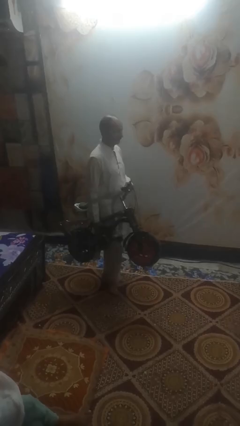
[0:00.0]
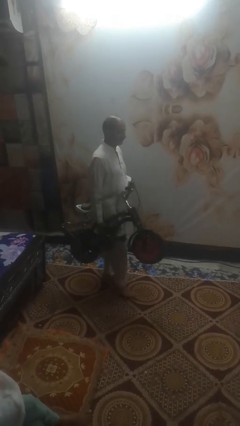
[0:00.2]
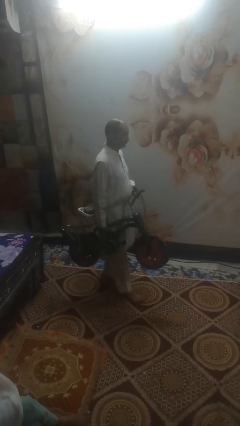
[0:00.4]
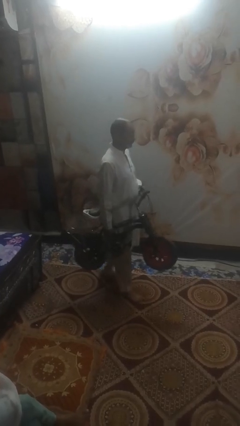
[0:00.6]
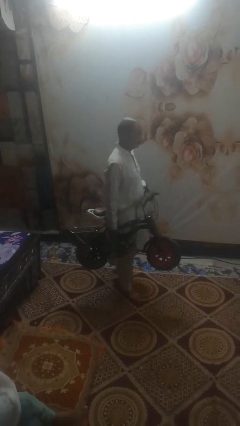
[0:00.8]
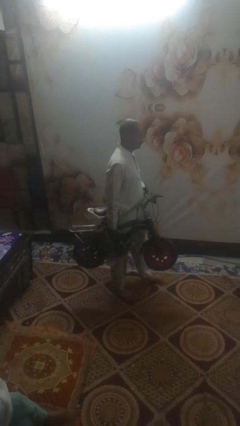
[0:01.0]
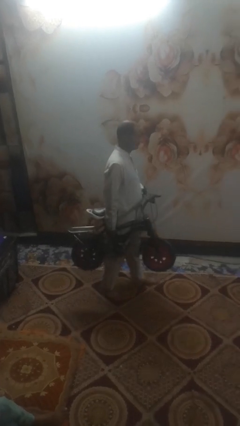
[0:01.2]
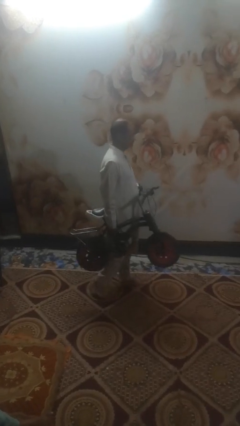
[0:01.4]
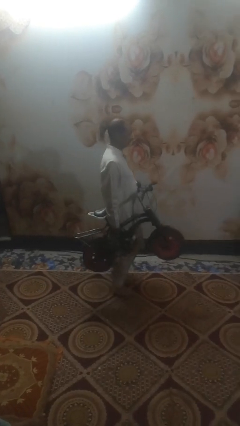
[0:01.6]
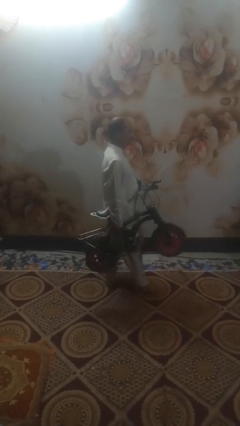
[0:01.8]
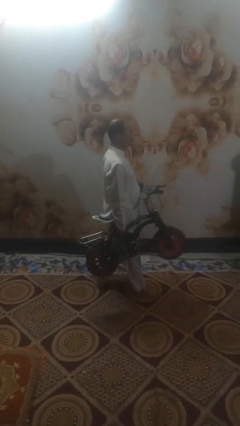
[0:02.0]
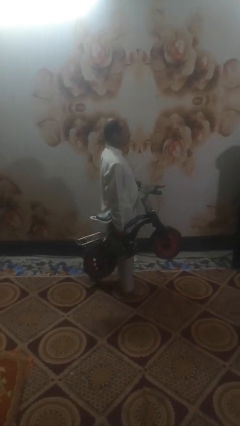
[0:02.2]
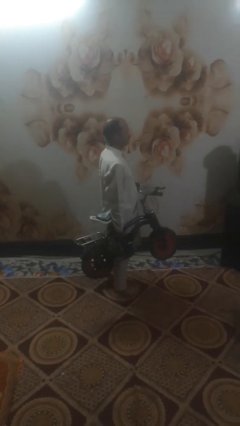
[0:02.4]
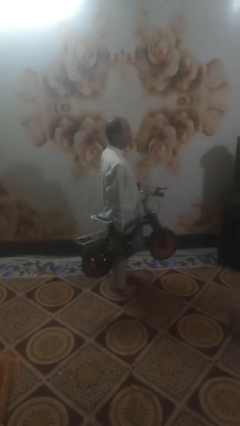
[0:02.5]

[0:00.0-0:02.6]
person carries bicycle

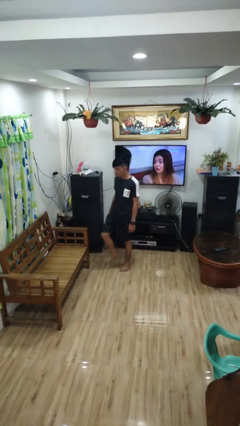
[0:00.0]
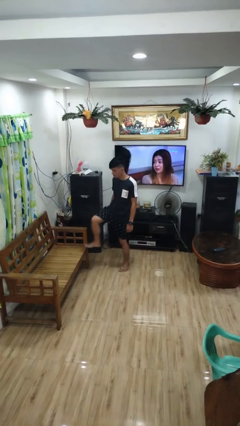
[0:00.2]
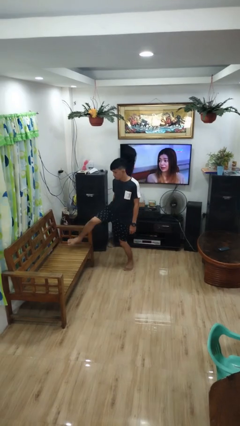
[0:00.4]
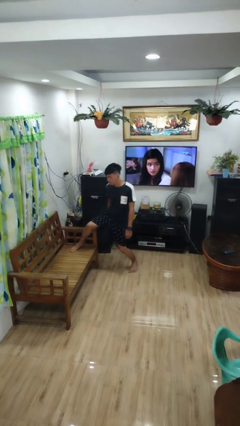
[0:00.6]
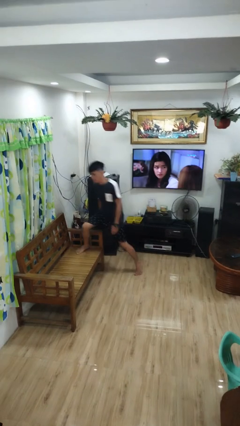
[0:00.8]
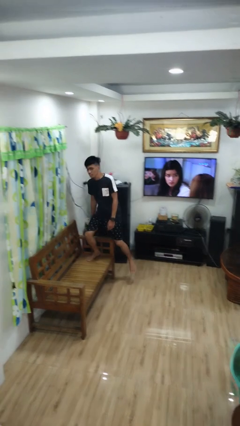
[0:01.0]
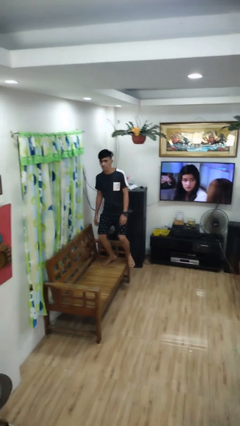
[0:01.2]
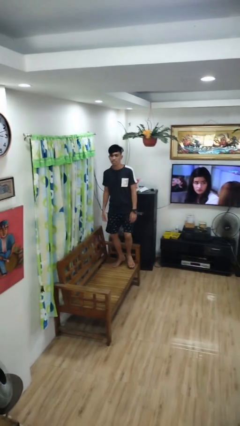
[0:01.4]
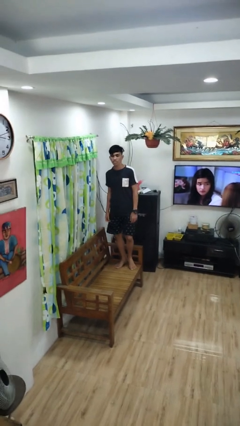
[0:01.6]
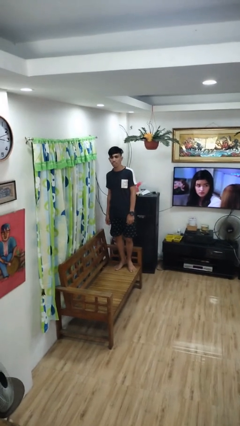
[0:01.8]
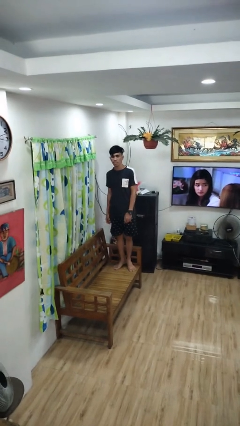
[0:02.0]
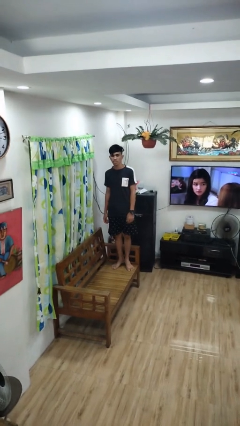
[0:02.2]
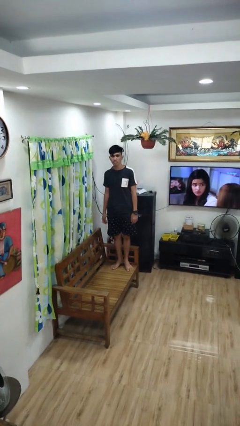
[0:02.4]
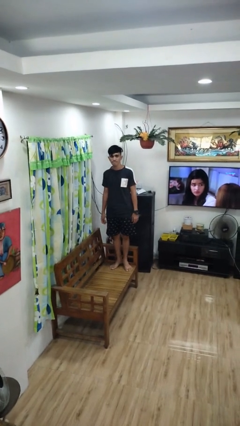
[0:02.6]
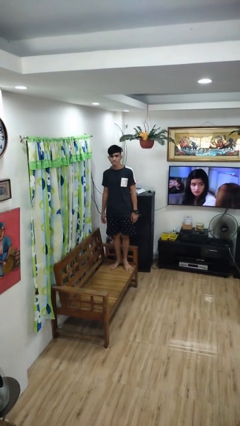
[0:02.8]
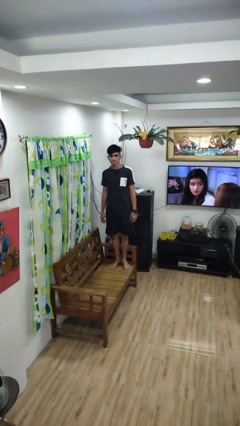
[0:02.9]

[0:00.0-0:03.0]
person climbs on couch

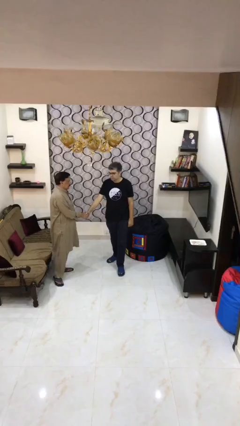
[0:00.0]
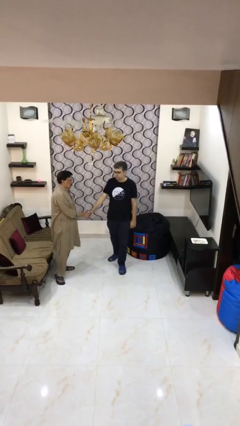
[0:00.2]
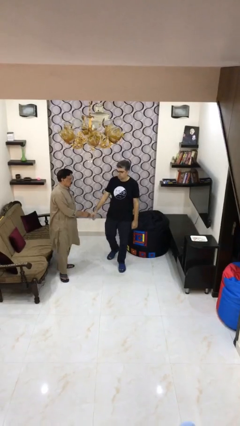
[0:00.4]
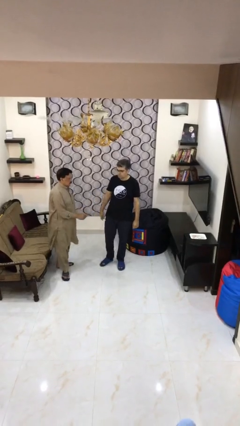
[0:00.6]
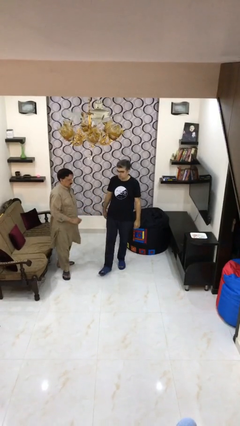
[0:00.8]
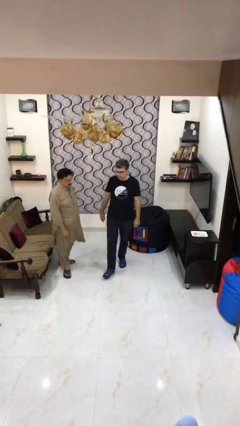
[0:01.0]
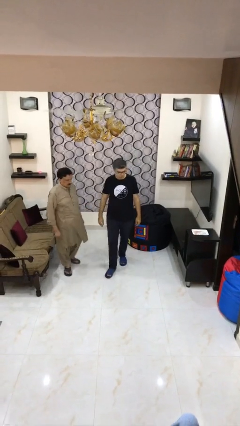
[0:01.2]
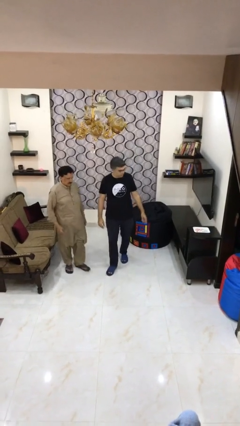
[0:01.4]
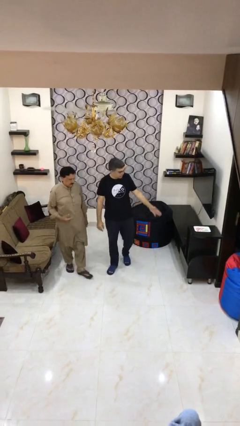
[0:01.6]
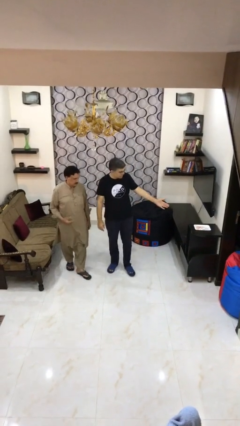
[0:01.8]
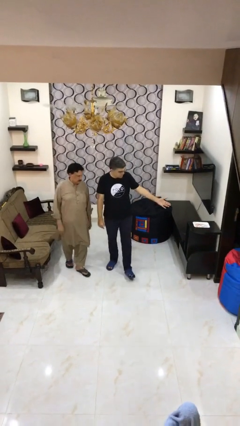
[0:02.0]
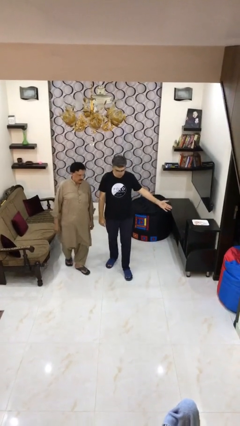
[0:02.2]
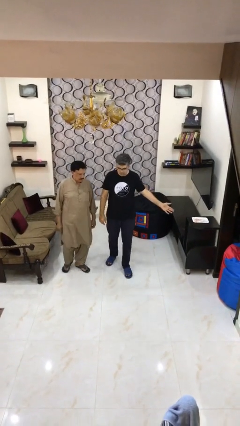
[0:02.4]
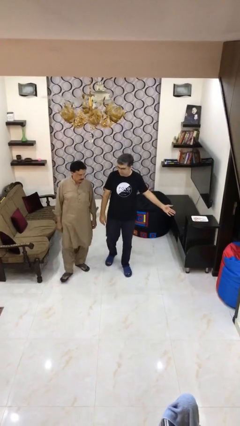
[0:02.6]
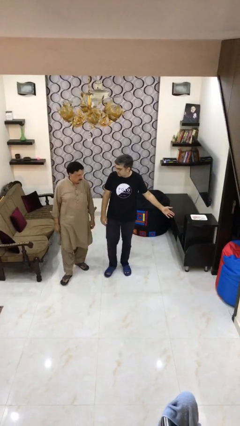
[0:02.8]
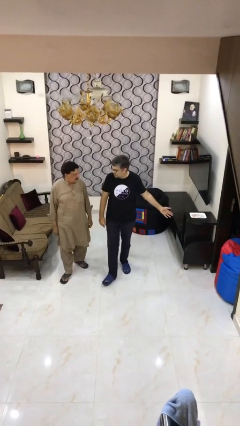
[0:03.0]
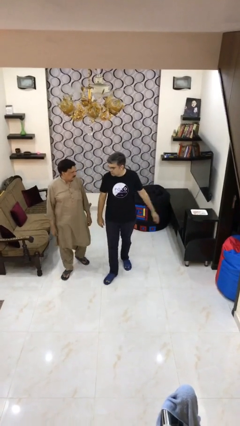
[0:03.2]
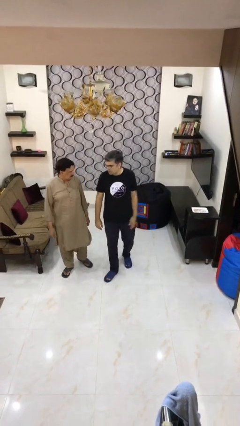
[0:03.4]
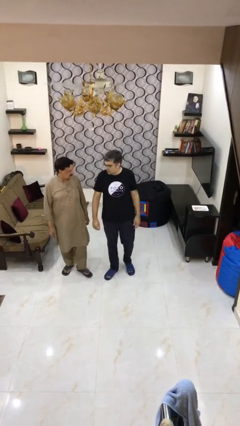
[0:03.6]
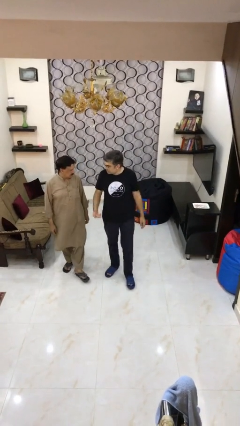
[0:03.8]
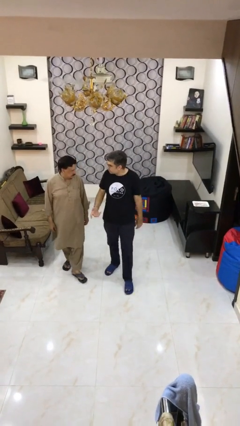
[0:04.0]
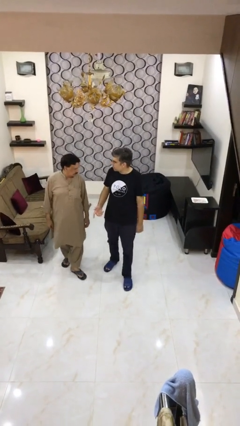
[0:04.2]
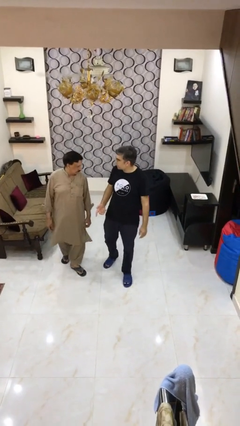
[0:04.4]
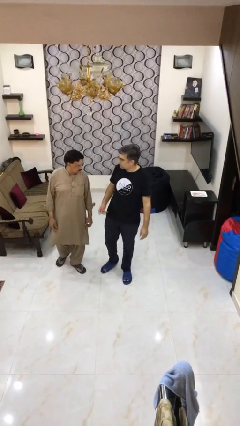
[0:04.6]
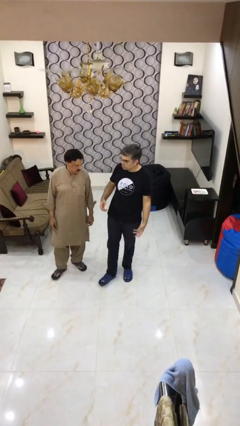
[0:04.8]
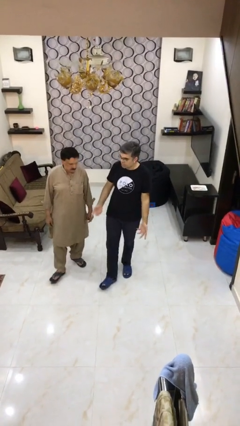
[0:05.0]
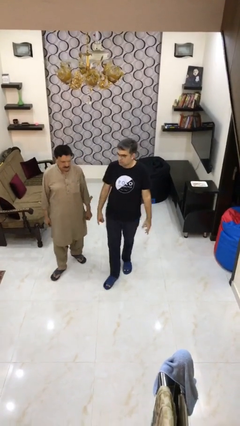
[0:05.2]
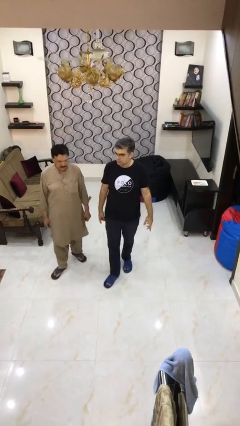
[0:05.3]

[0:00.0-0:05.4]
person talks to person

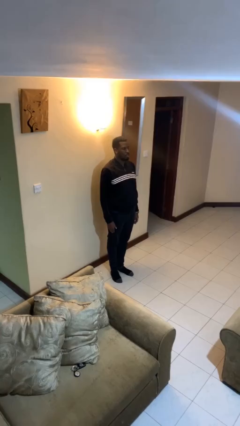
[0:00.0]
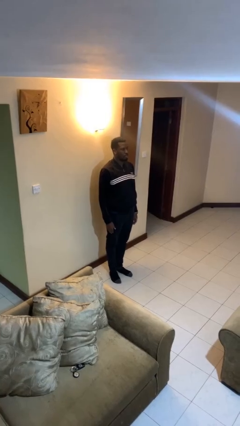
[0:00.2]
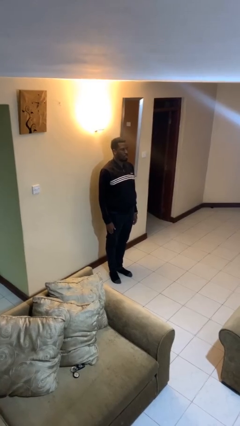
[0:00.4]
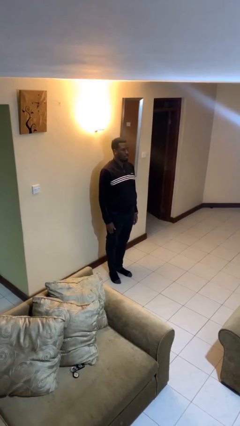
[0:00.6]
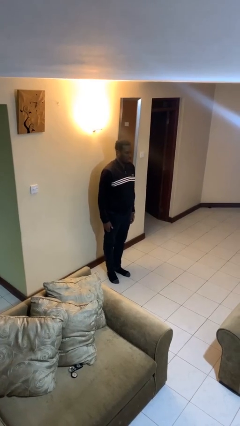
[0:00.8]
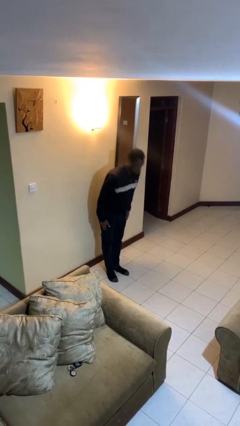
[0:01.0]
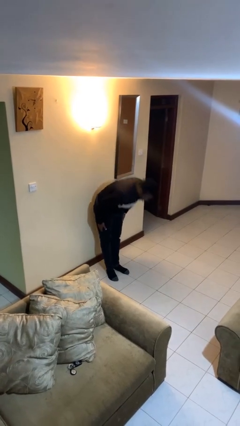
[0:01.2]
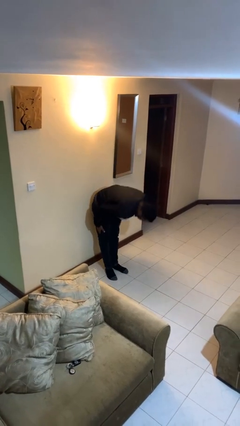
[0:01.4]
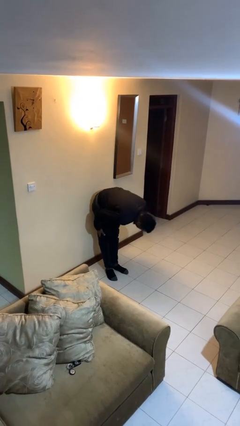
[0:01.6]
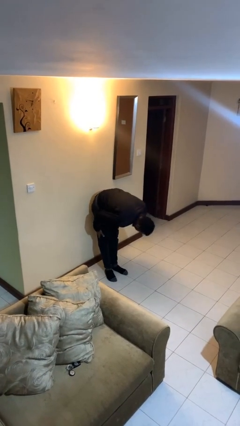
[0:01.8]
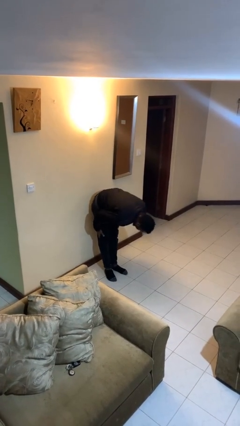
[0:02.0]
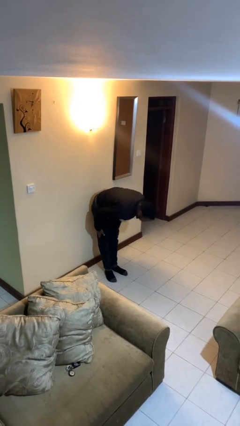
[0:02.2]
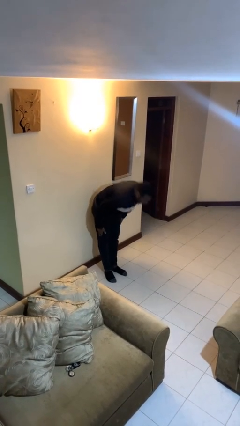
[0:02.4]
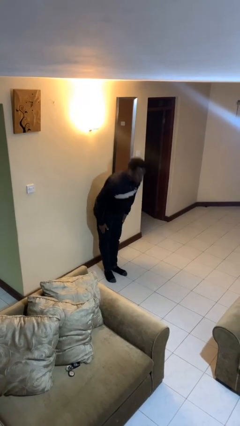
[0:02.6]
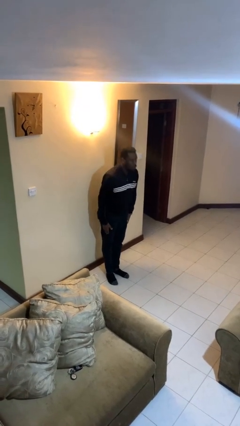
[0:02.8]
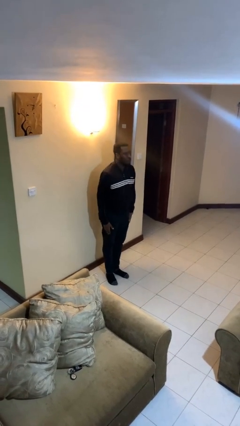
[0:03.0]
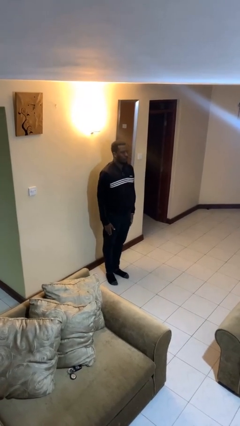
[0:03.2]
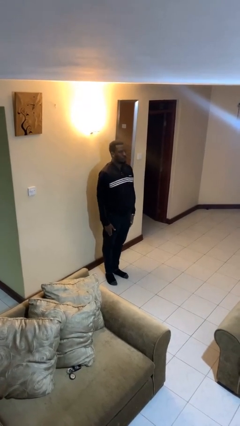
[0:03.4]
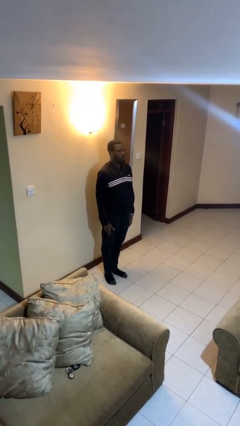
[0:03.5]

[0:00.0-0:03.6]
person bows

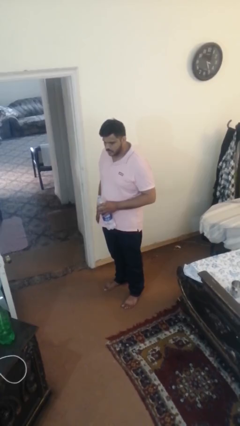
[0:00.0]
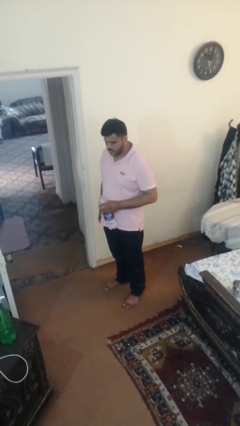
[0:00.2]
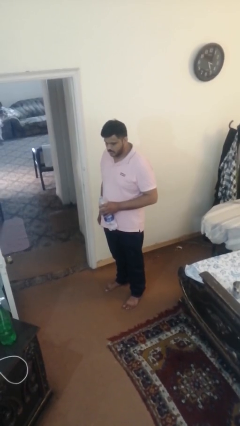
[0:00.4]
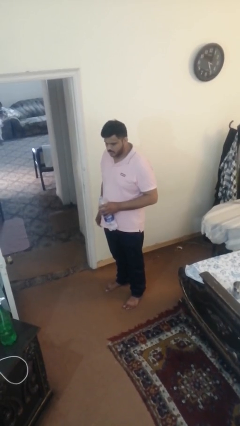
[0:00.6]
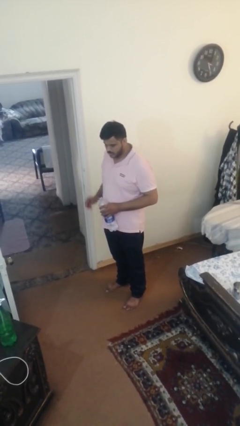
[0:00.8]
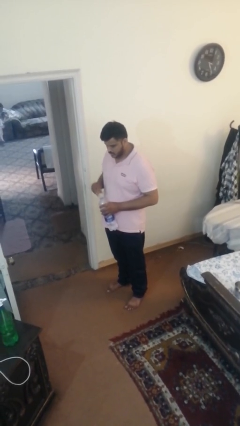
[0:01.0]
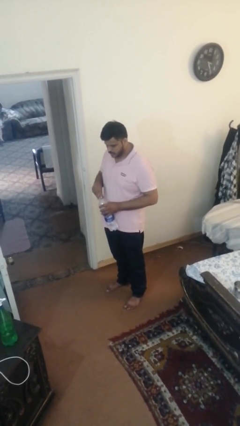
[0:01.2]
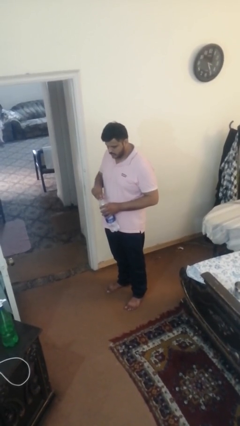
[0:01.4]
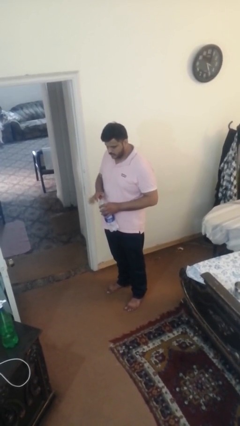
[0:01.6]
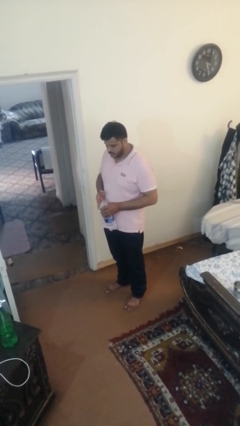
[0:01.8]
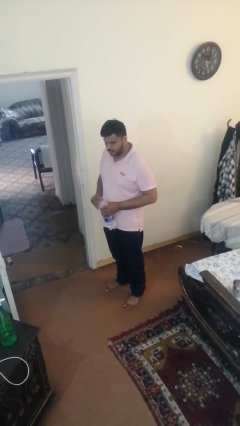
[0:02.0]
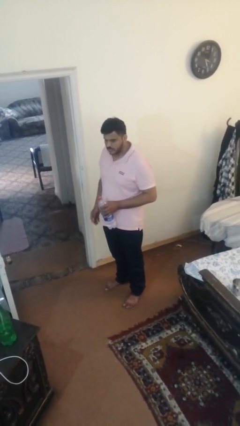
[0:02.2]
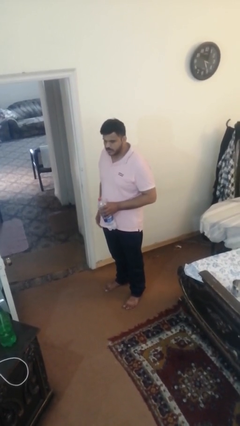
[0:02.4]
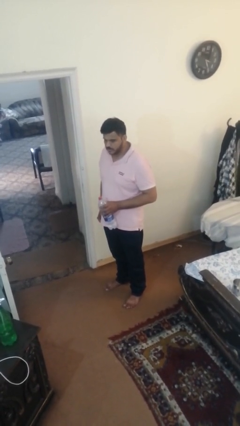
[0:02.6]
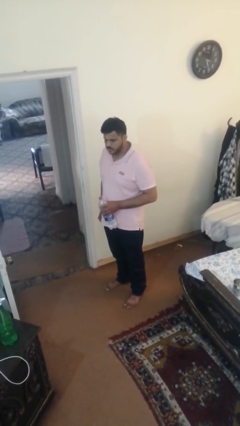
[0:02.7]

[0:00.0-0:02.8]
person screws lid to bottle

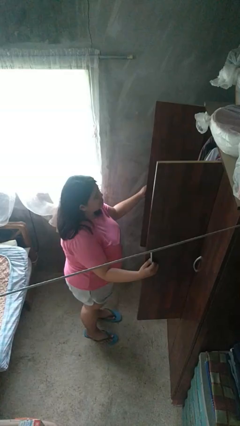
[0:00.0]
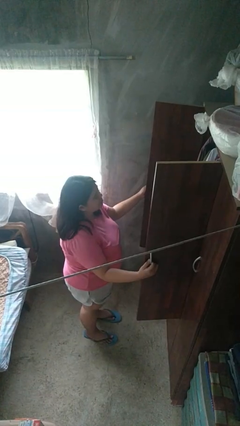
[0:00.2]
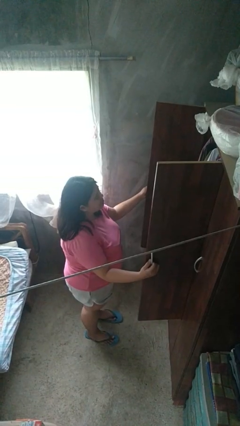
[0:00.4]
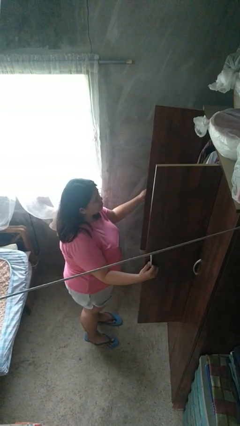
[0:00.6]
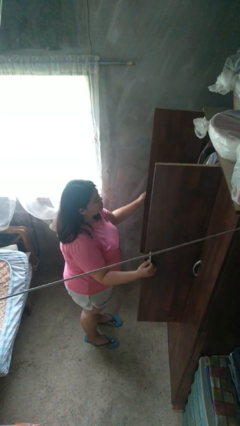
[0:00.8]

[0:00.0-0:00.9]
person closes closet door
